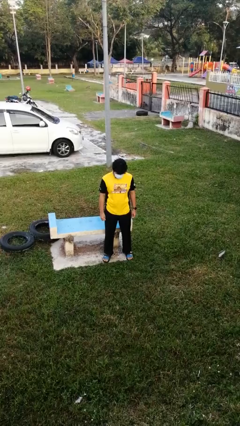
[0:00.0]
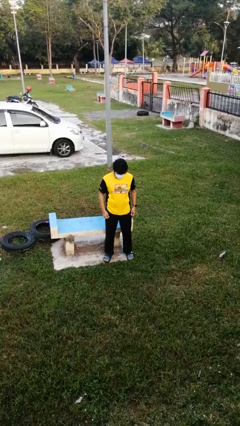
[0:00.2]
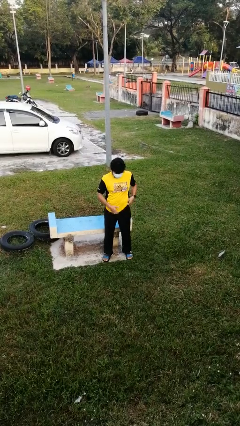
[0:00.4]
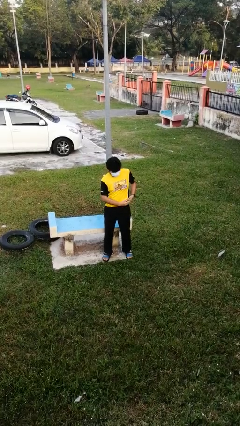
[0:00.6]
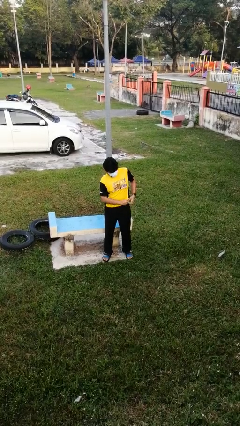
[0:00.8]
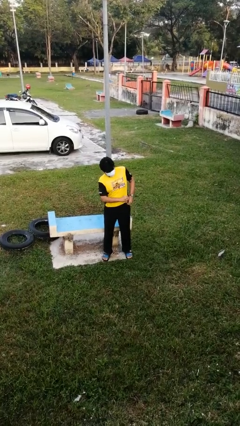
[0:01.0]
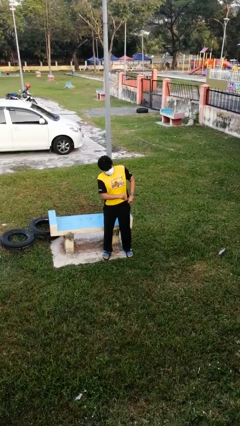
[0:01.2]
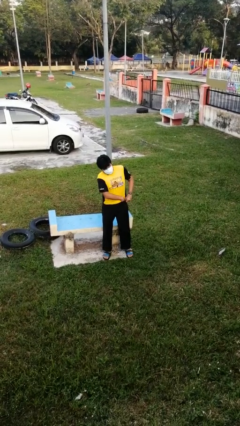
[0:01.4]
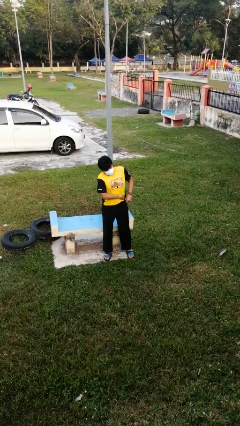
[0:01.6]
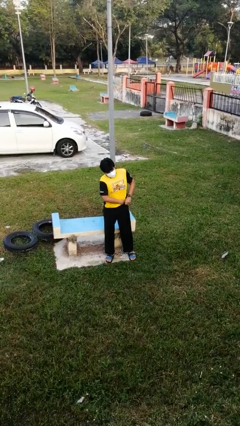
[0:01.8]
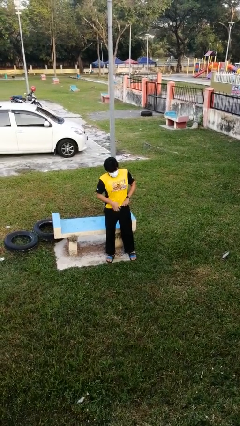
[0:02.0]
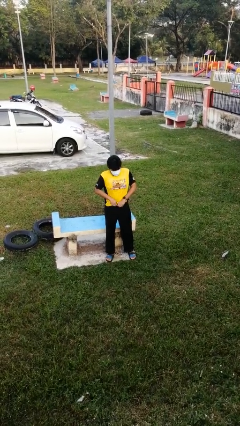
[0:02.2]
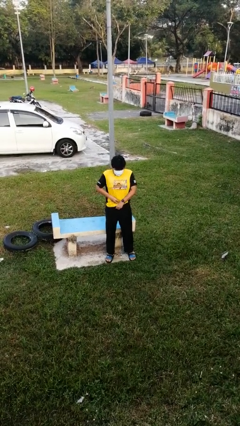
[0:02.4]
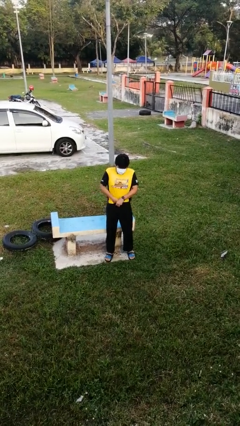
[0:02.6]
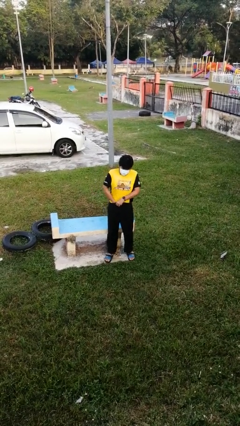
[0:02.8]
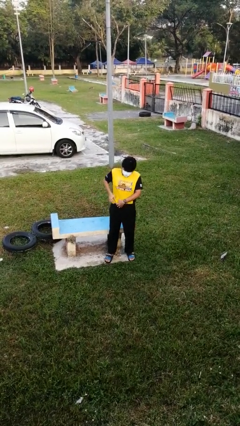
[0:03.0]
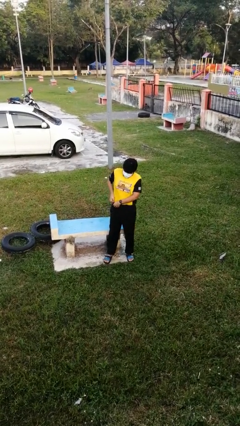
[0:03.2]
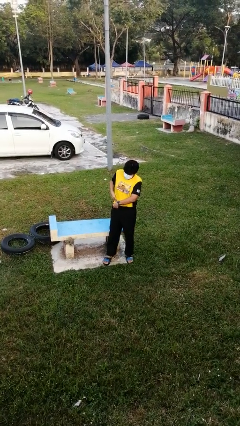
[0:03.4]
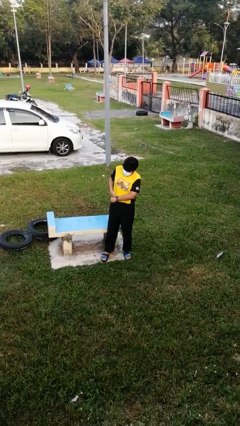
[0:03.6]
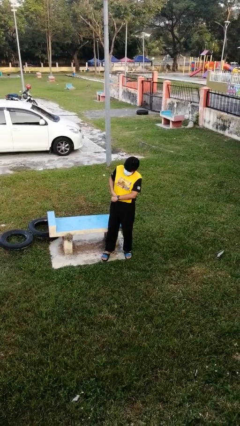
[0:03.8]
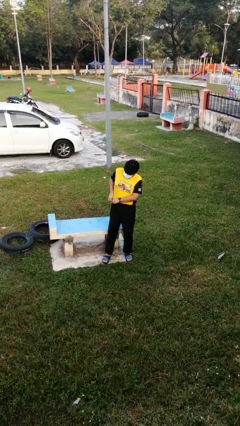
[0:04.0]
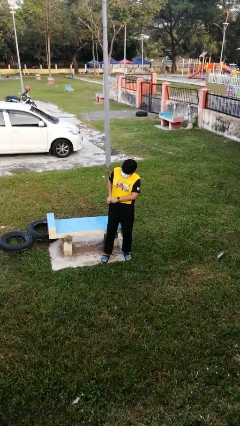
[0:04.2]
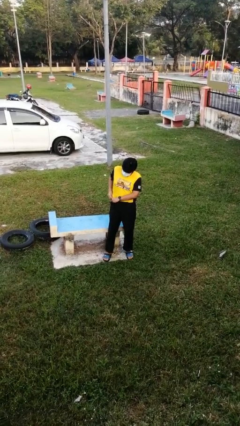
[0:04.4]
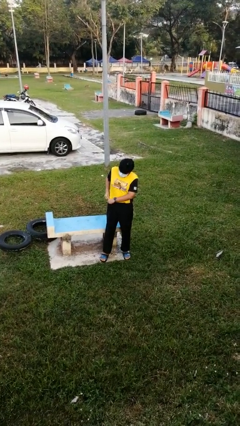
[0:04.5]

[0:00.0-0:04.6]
person tucks in shirt

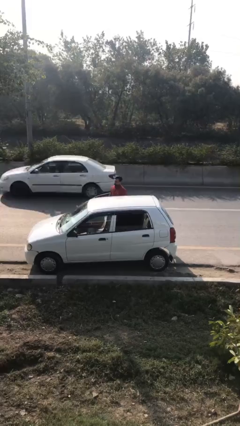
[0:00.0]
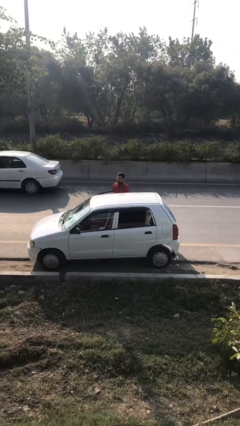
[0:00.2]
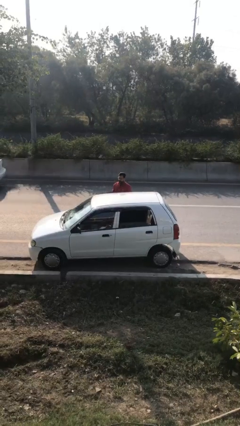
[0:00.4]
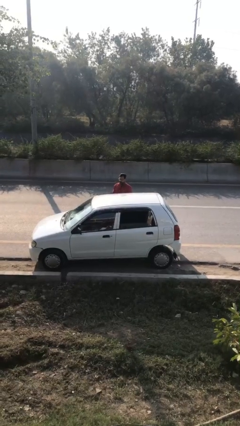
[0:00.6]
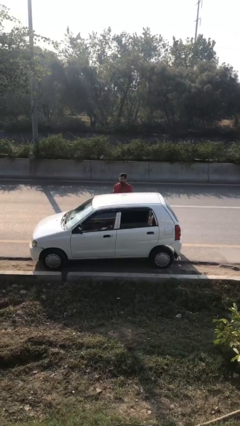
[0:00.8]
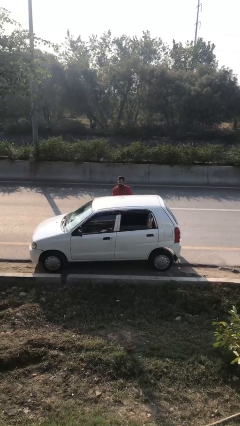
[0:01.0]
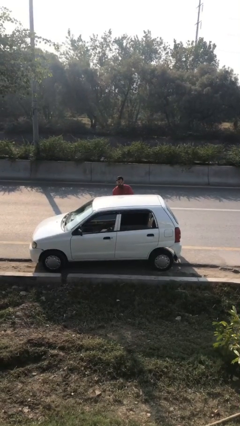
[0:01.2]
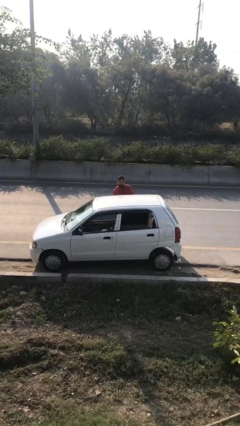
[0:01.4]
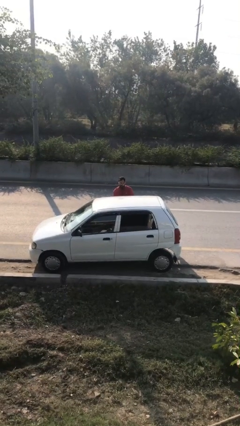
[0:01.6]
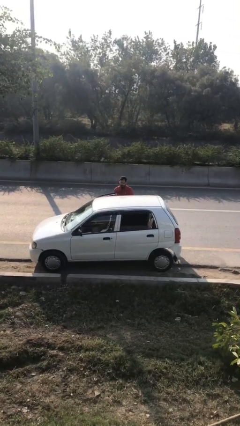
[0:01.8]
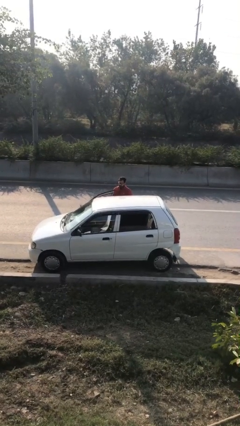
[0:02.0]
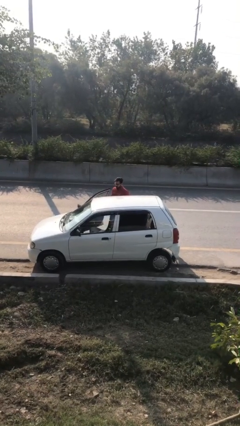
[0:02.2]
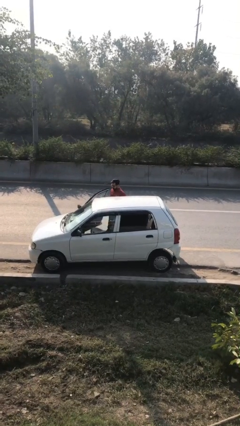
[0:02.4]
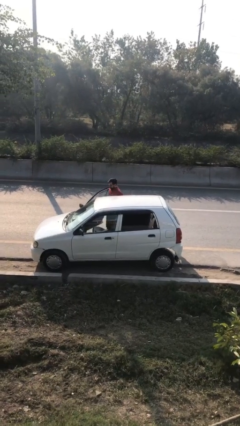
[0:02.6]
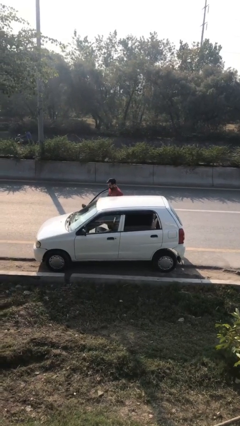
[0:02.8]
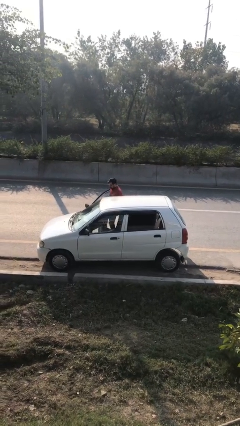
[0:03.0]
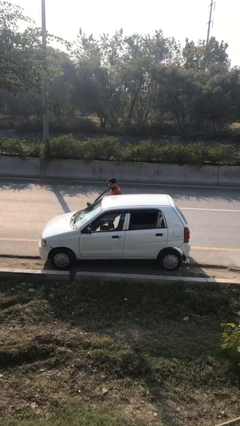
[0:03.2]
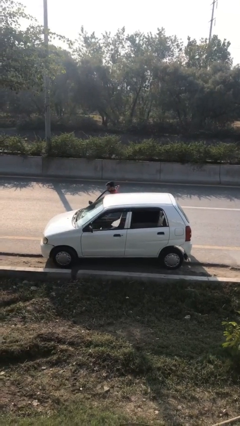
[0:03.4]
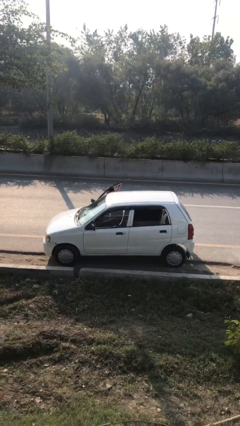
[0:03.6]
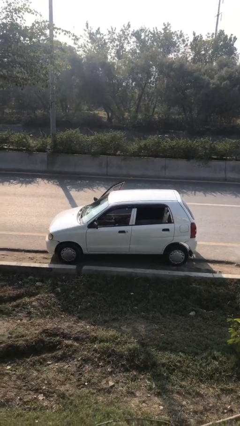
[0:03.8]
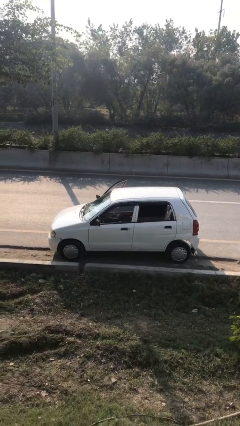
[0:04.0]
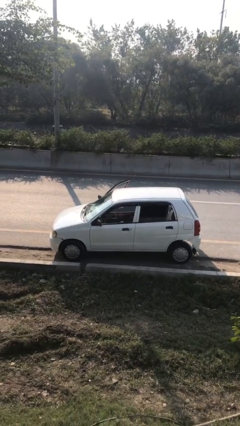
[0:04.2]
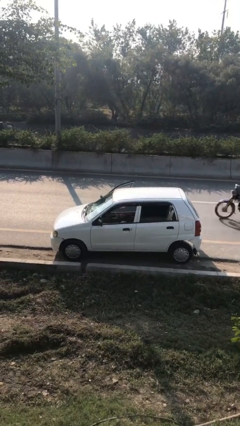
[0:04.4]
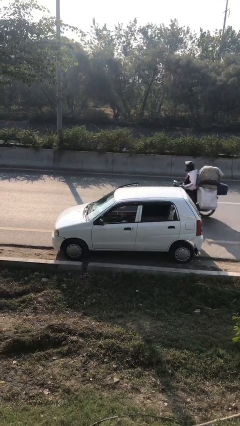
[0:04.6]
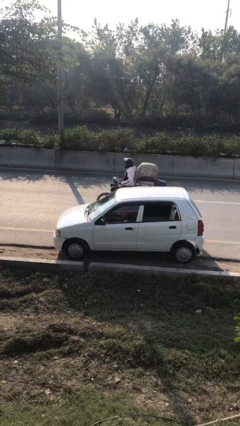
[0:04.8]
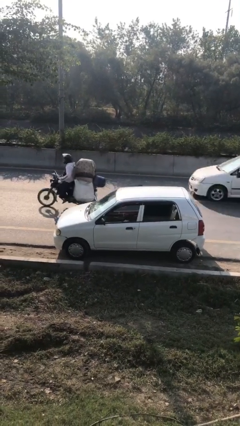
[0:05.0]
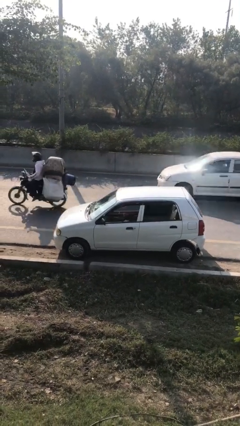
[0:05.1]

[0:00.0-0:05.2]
person enters car

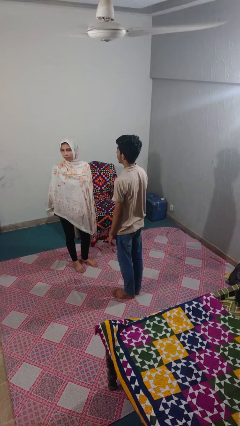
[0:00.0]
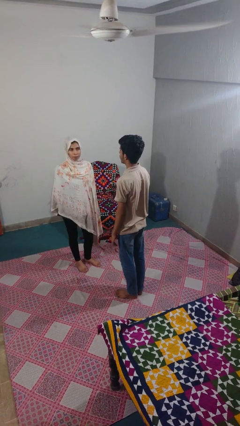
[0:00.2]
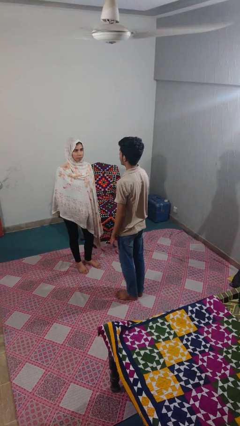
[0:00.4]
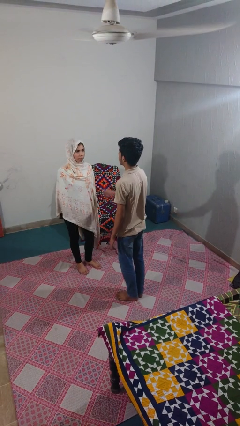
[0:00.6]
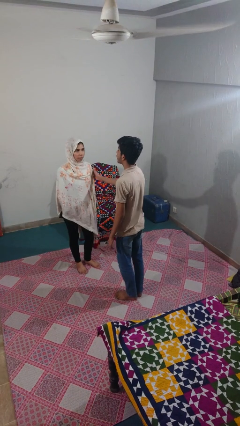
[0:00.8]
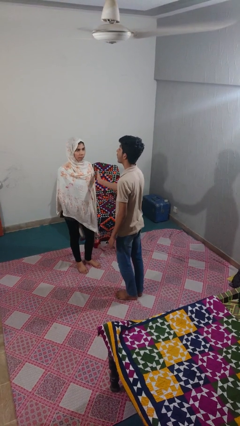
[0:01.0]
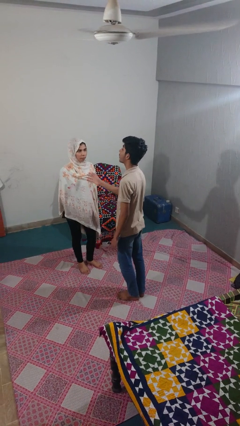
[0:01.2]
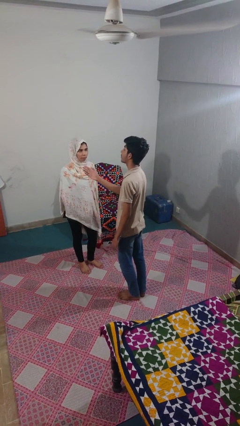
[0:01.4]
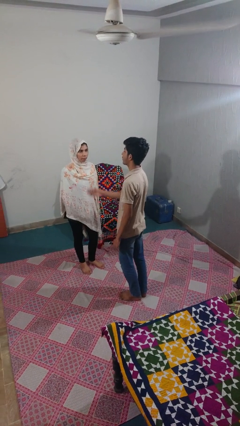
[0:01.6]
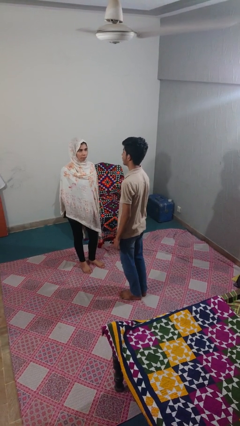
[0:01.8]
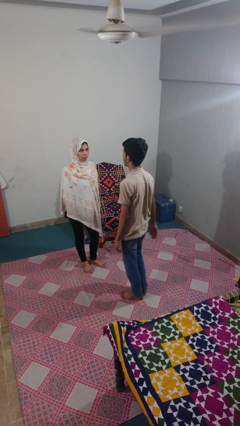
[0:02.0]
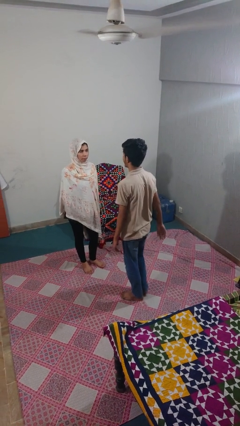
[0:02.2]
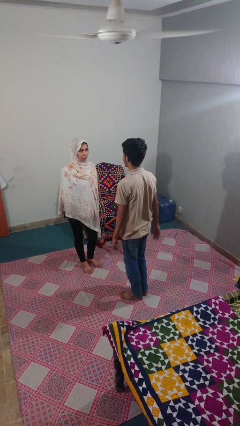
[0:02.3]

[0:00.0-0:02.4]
person shoves person

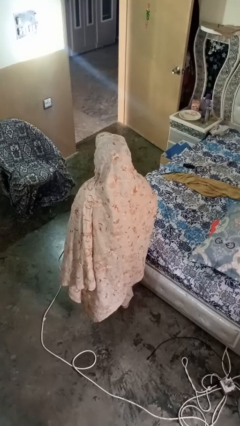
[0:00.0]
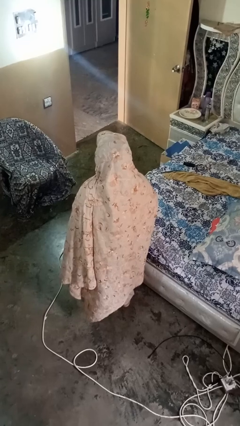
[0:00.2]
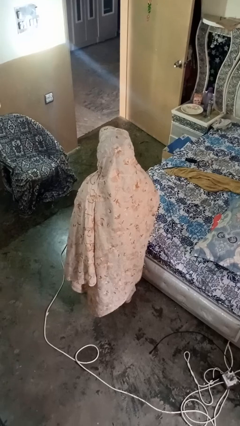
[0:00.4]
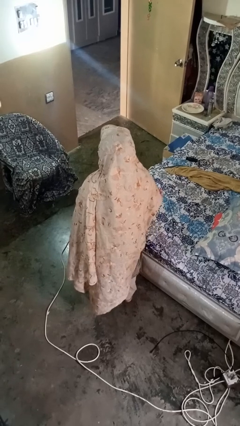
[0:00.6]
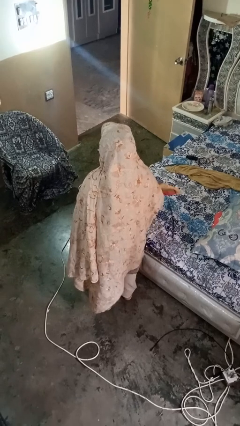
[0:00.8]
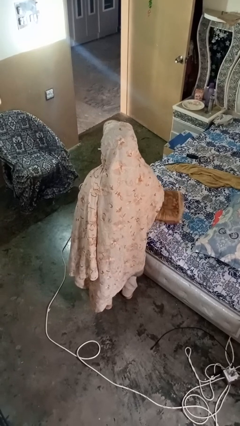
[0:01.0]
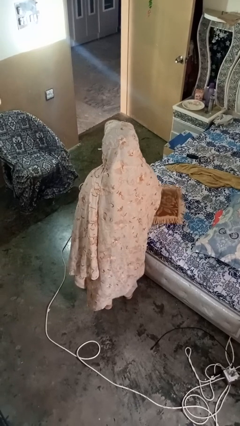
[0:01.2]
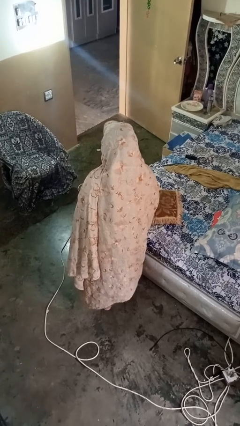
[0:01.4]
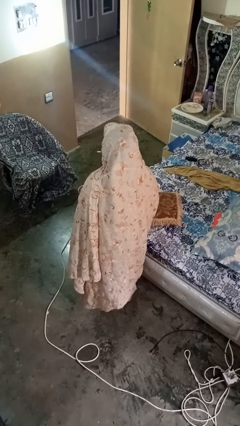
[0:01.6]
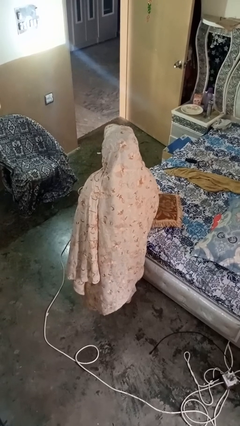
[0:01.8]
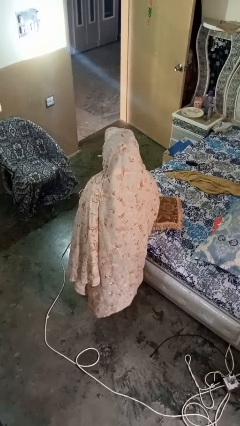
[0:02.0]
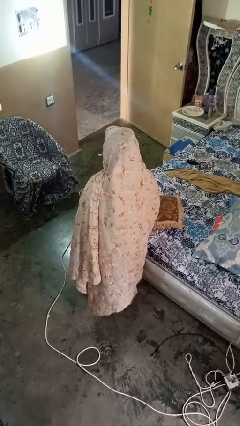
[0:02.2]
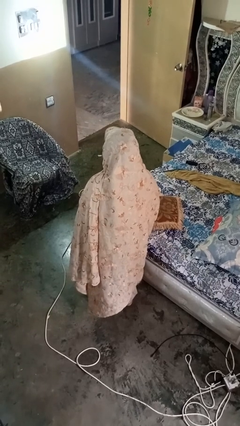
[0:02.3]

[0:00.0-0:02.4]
person puts down object on bed

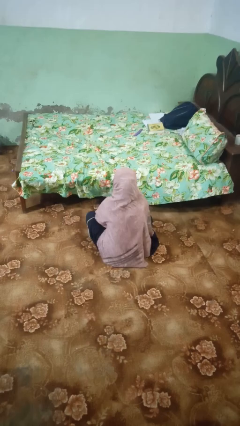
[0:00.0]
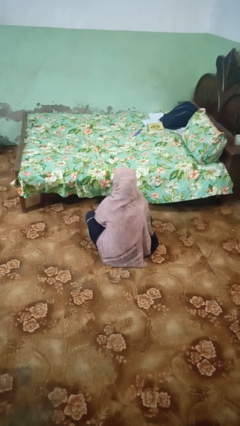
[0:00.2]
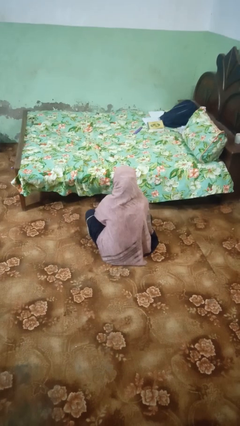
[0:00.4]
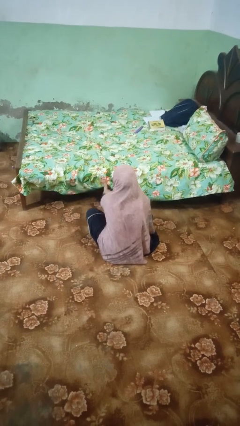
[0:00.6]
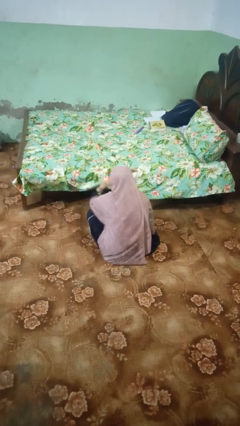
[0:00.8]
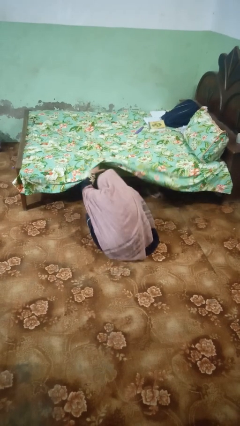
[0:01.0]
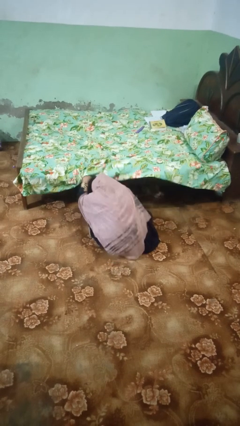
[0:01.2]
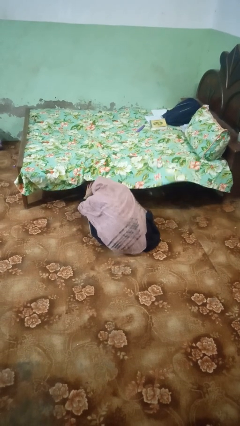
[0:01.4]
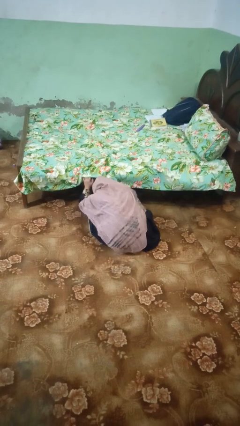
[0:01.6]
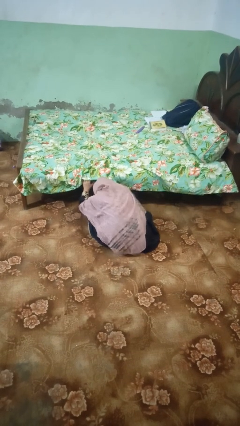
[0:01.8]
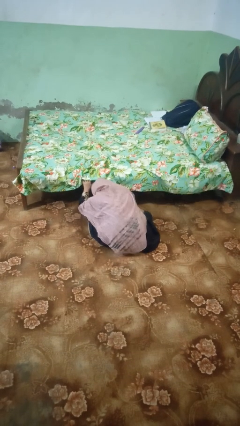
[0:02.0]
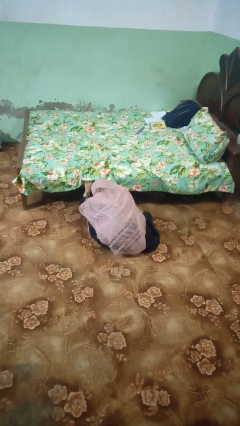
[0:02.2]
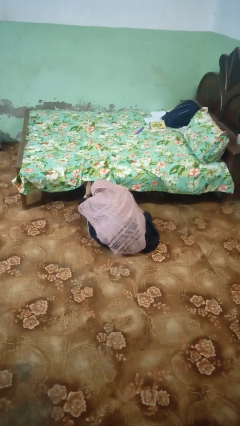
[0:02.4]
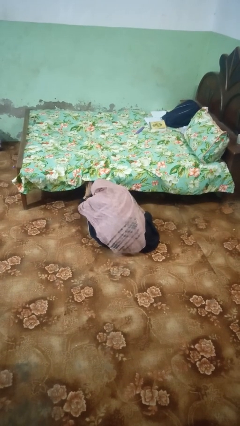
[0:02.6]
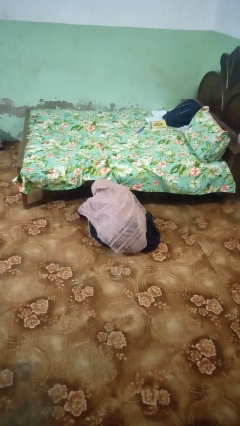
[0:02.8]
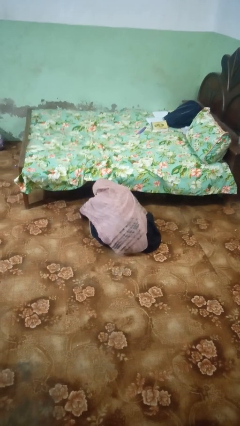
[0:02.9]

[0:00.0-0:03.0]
person searches under bed
